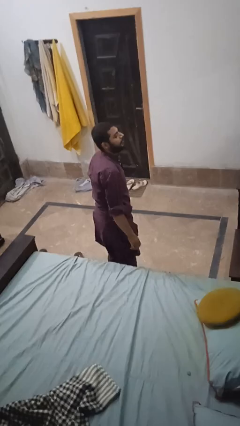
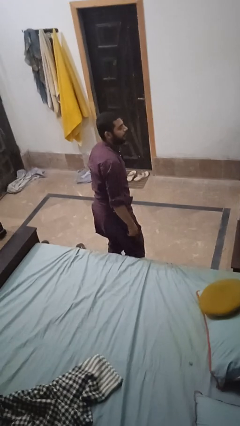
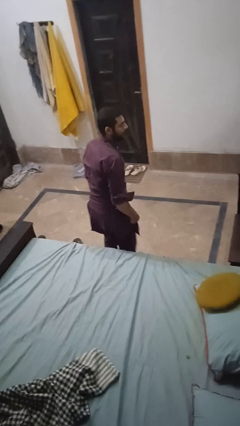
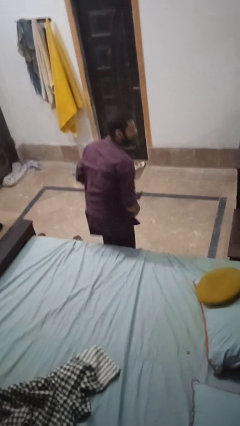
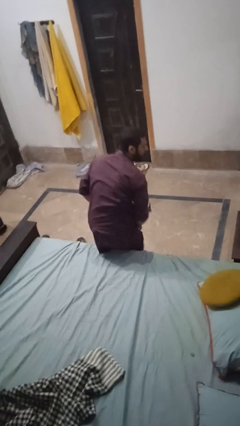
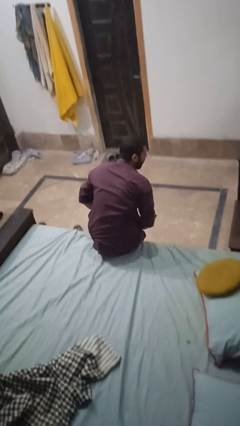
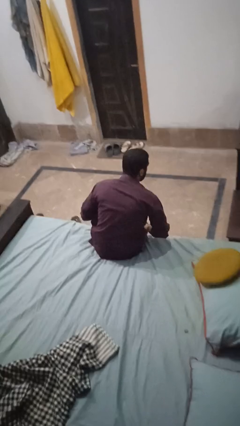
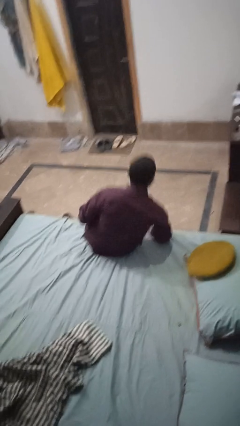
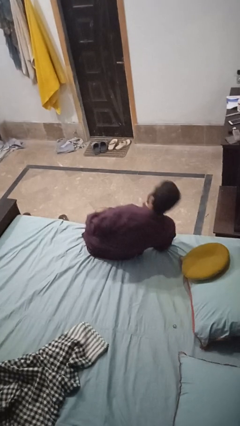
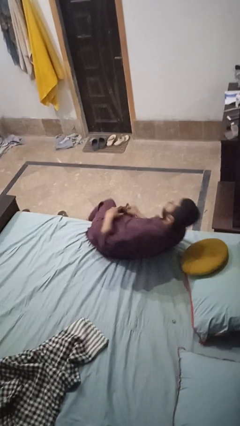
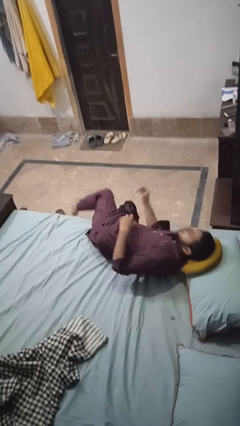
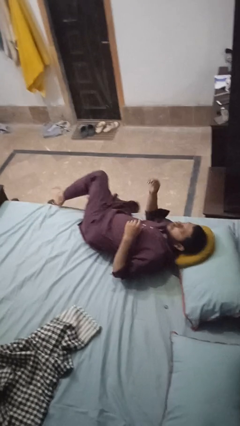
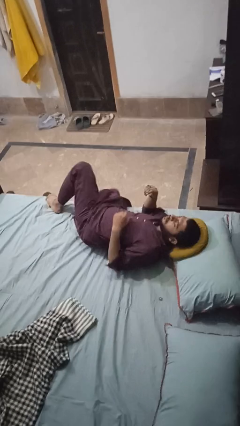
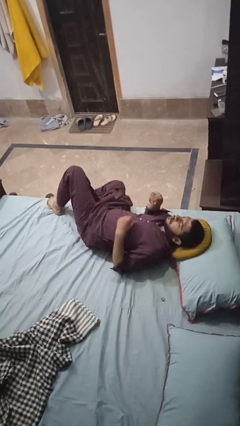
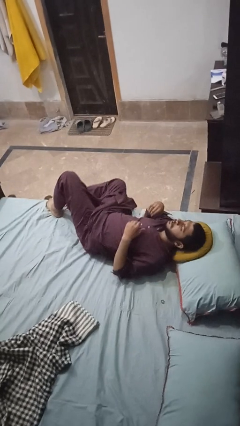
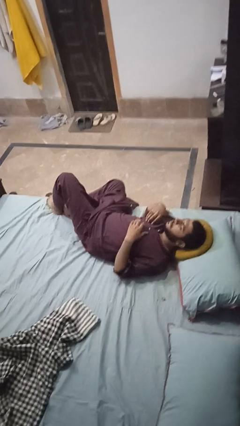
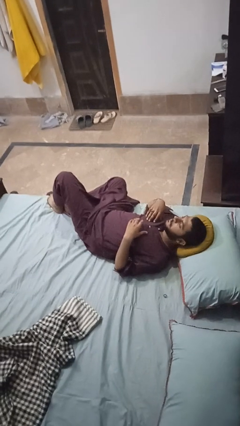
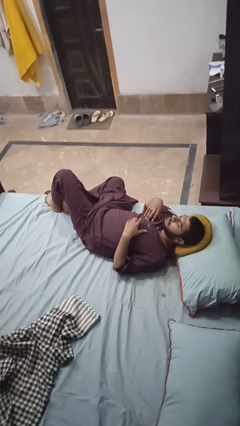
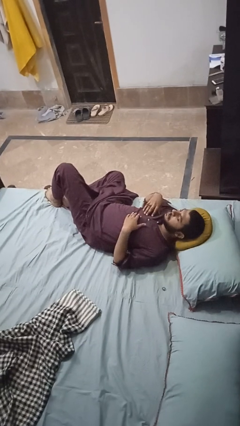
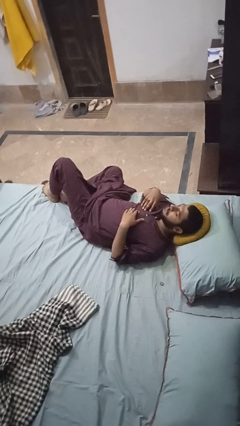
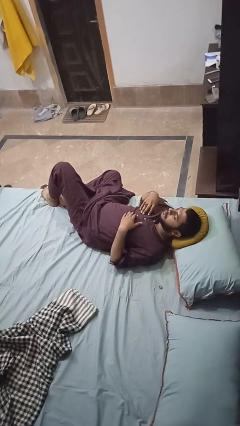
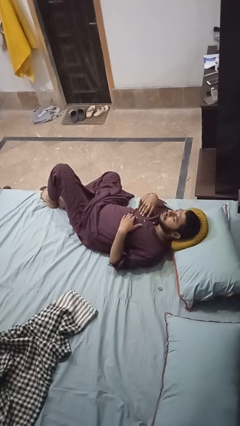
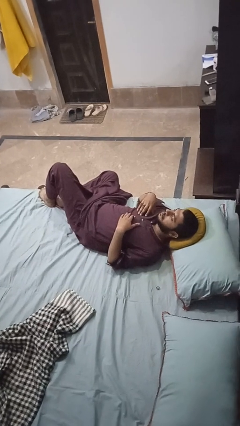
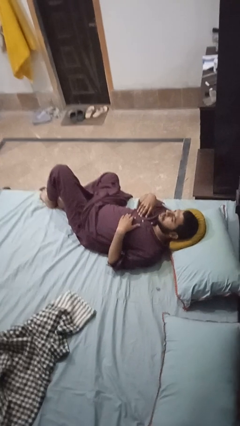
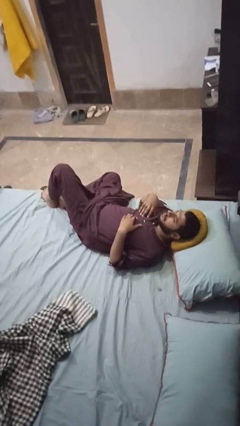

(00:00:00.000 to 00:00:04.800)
person lies down on bed

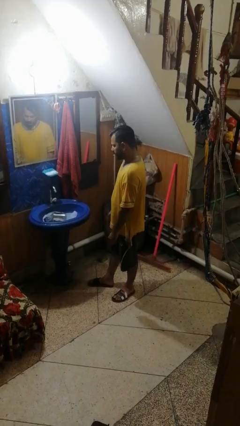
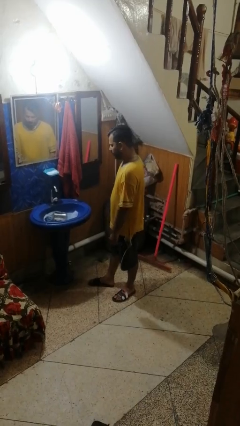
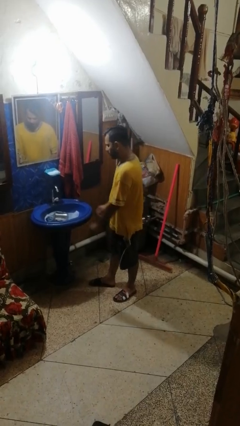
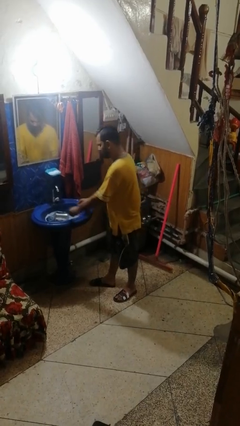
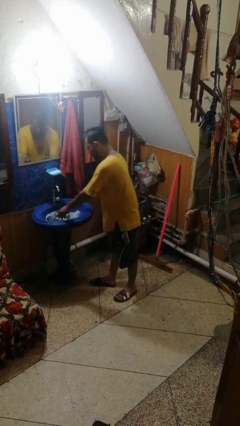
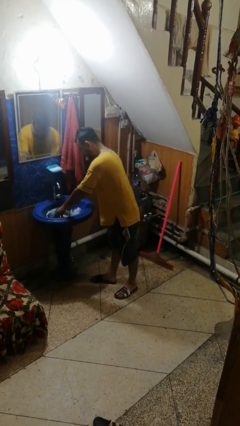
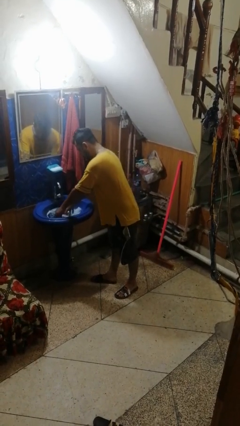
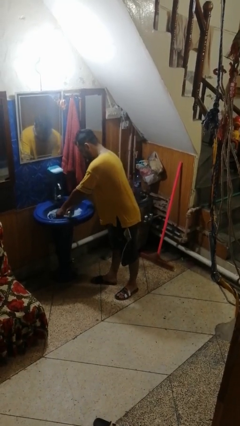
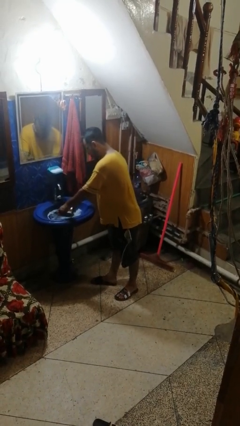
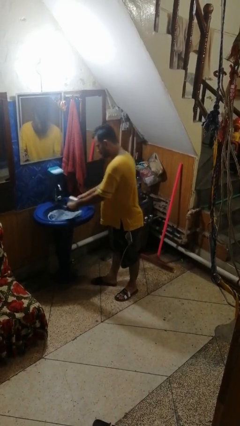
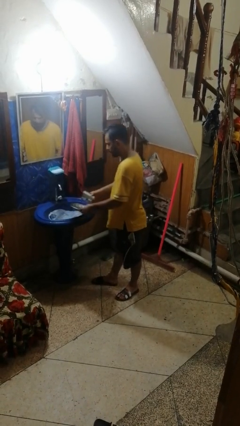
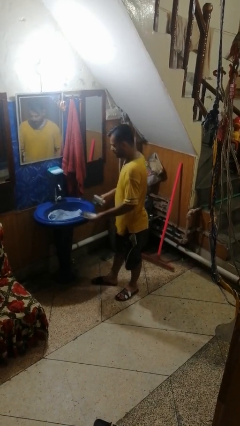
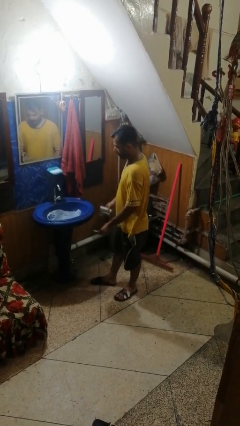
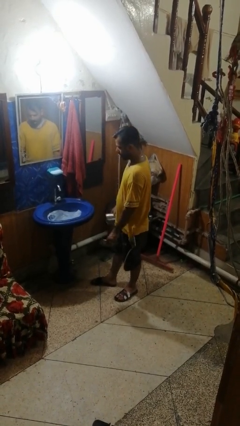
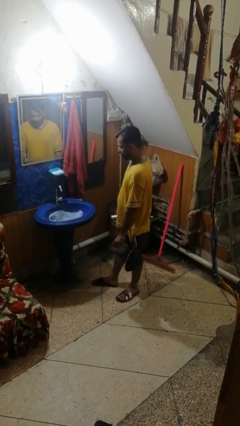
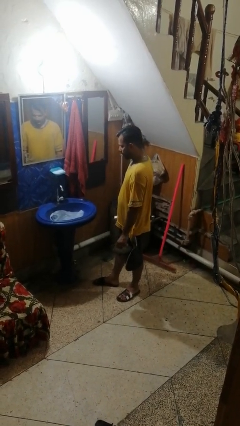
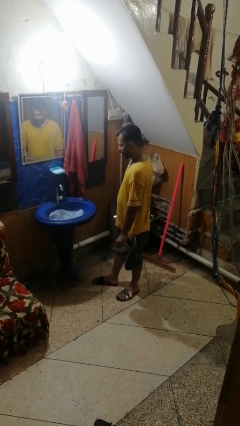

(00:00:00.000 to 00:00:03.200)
person unloads dishwasher

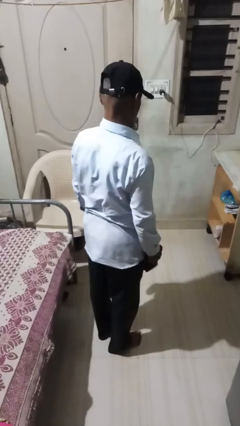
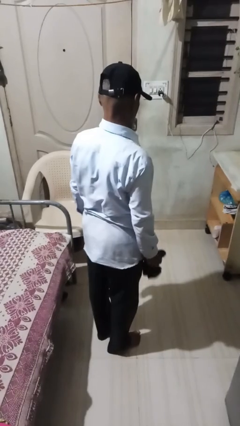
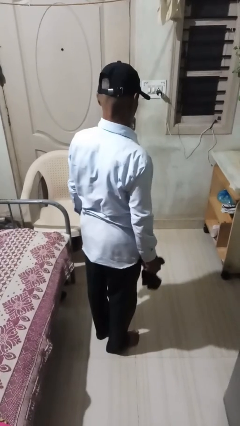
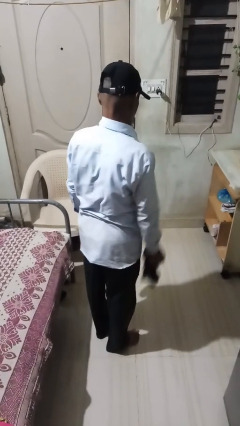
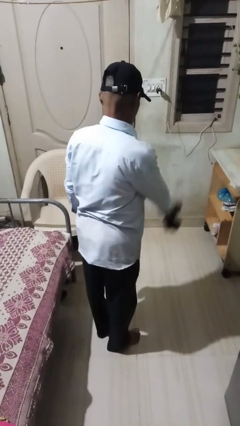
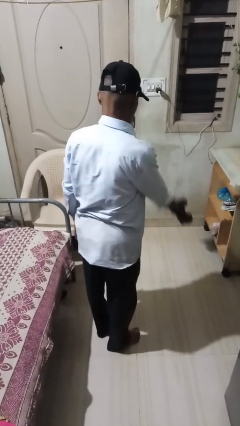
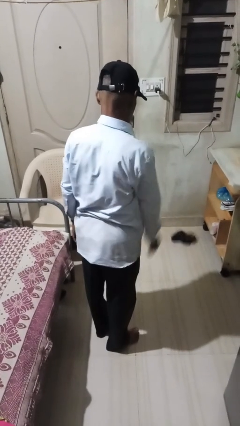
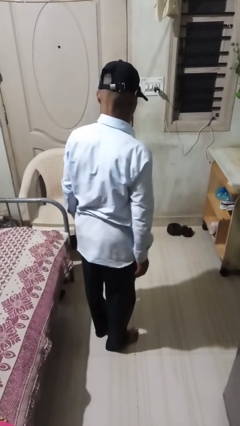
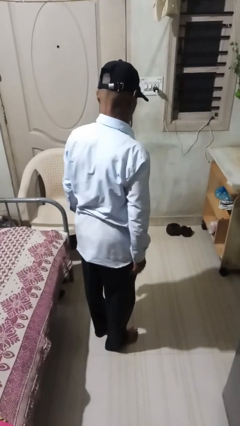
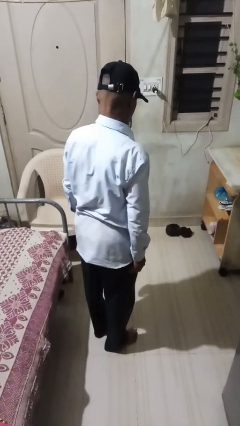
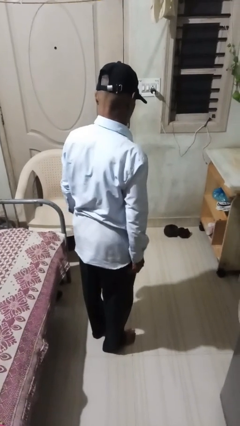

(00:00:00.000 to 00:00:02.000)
person throws object to ground

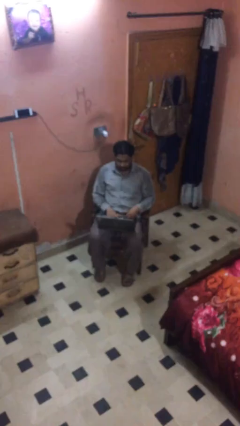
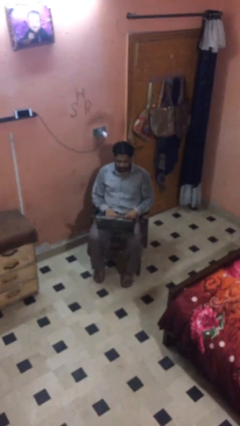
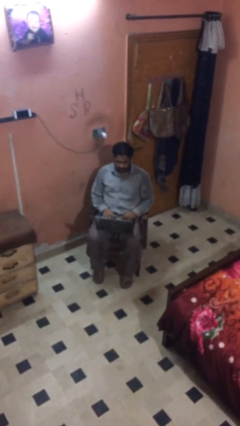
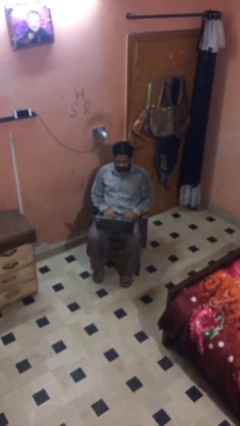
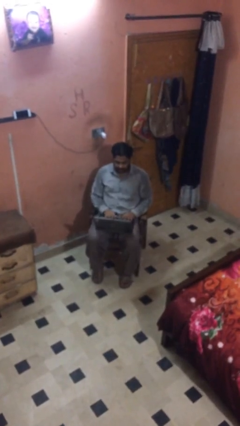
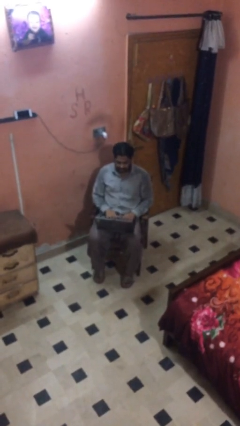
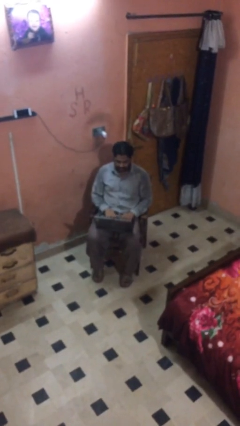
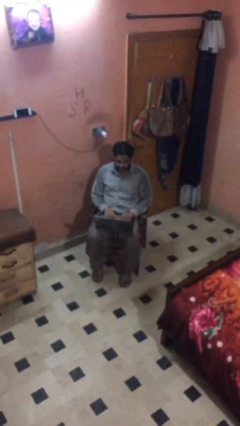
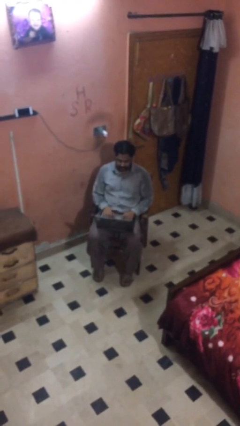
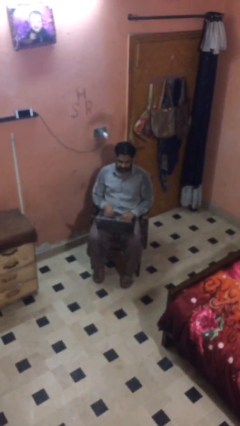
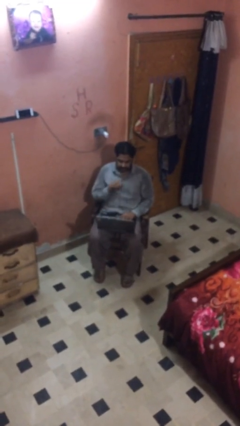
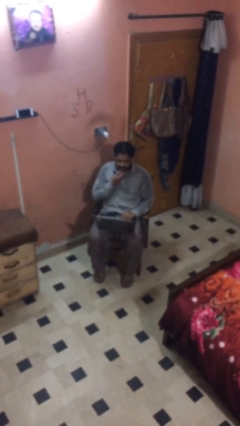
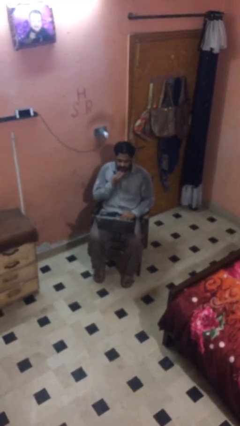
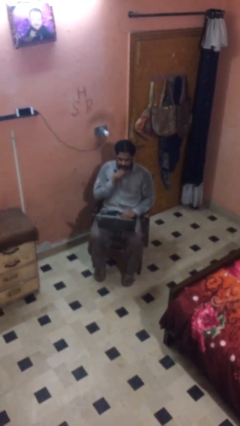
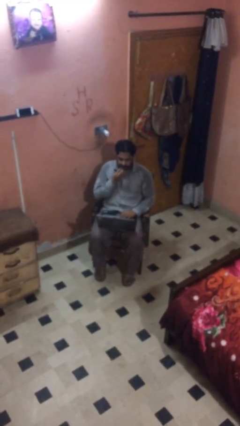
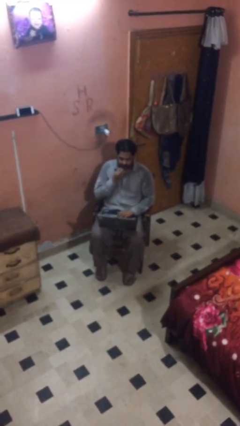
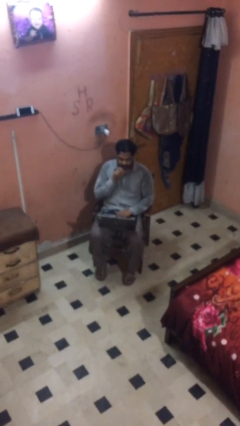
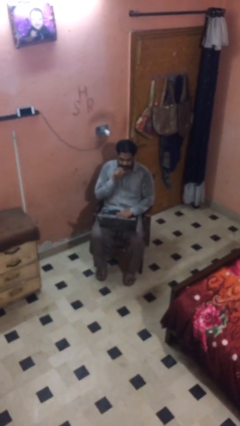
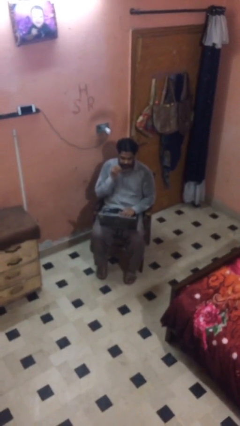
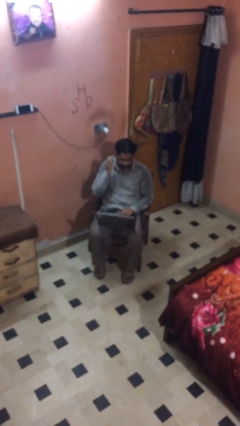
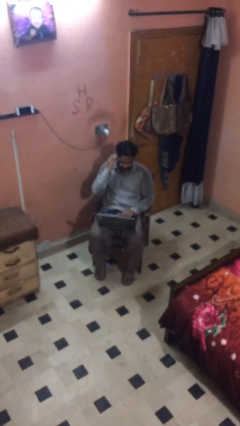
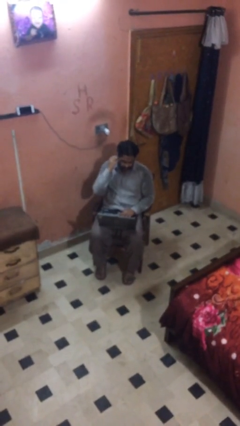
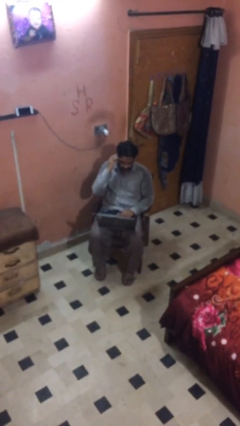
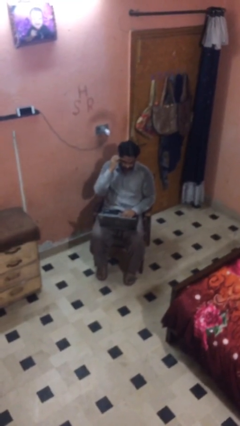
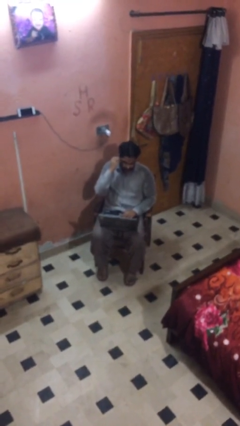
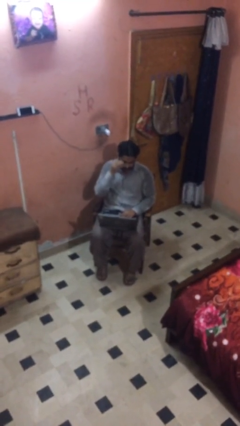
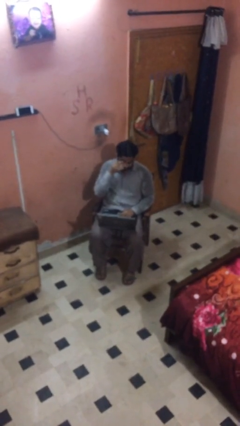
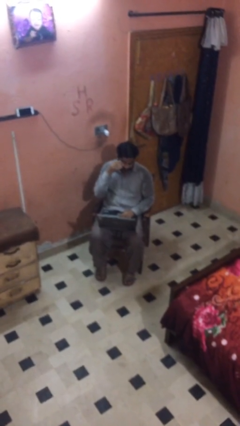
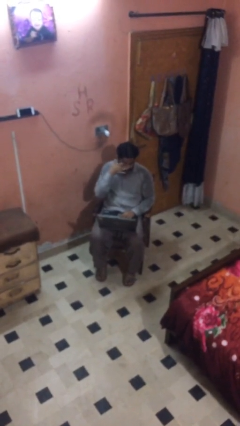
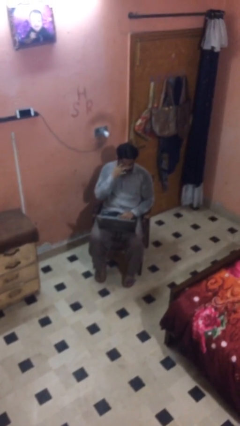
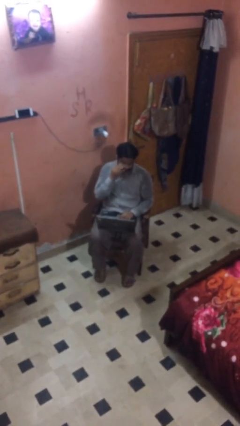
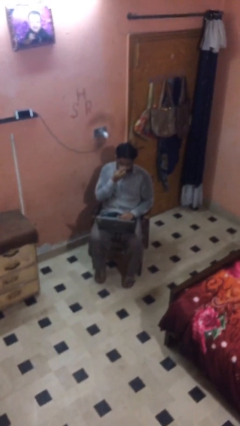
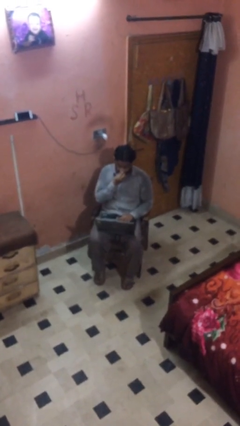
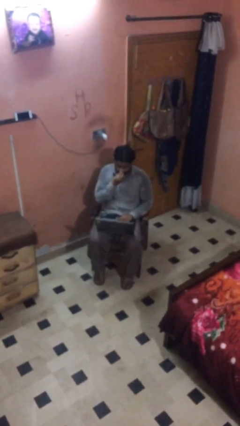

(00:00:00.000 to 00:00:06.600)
person interacts with laptop

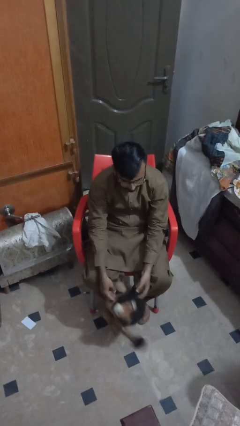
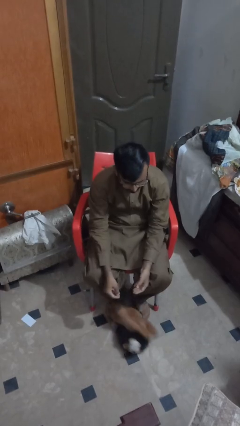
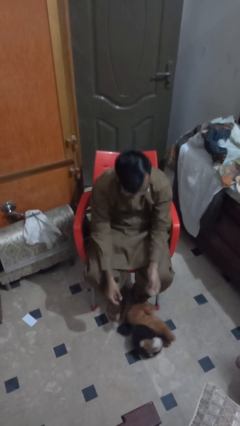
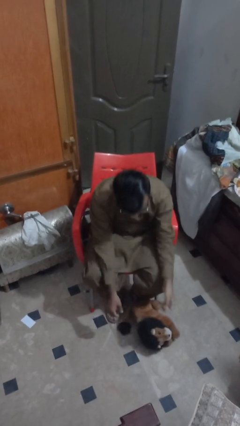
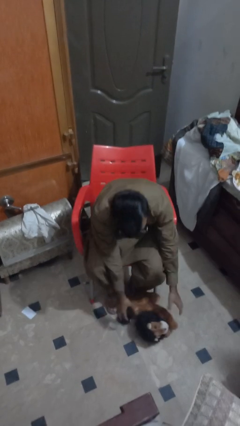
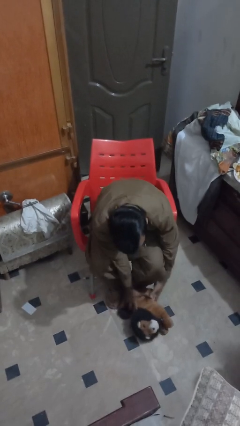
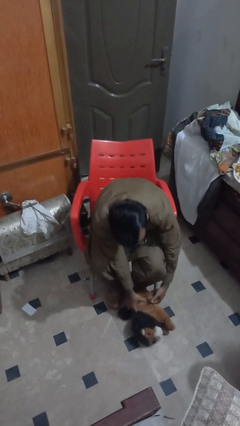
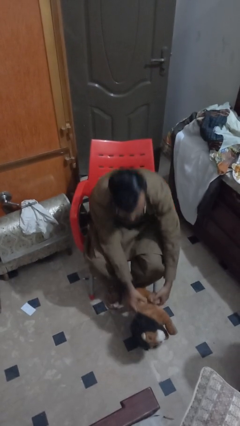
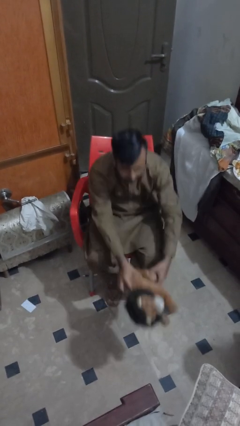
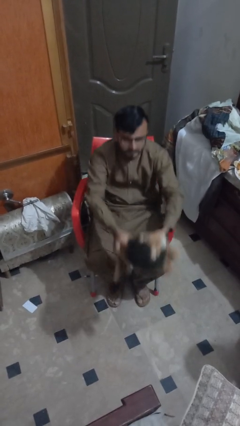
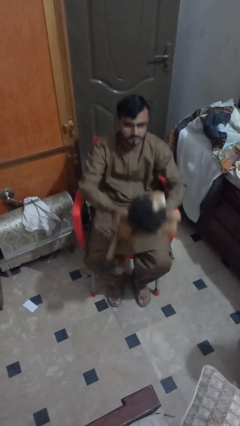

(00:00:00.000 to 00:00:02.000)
person catches dropped object
